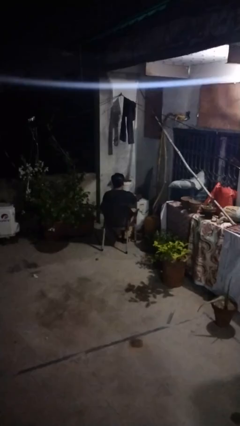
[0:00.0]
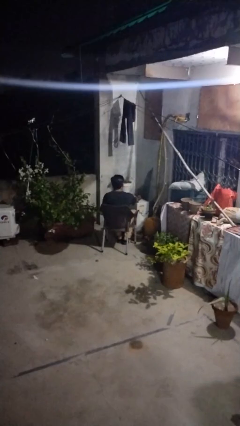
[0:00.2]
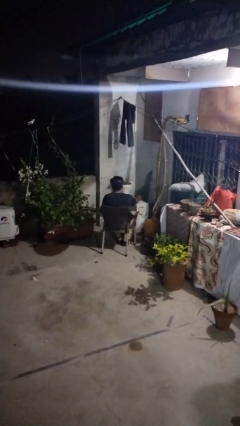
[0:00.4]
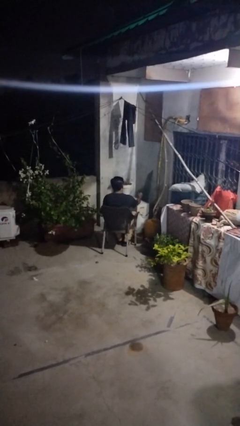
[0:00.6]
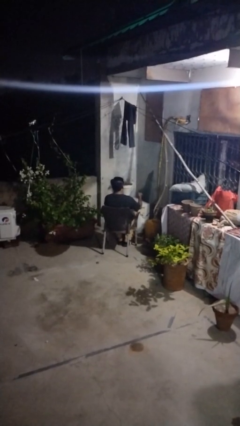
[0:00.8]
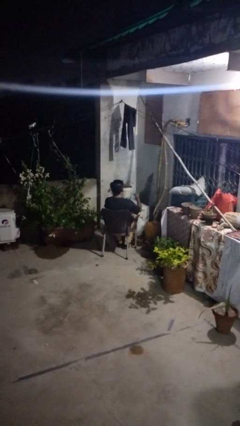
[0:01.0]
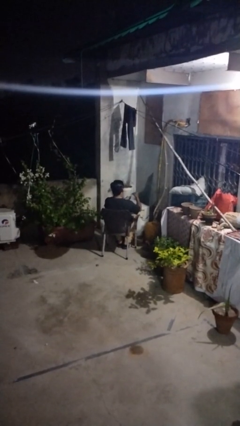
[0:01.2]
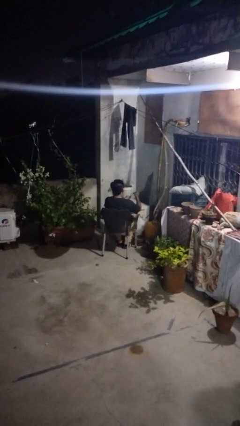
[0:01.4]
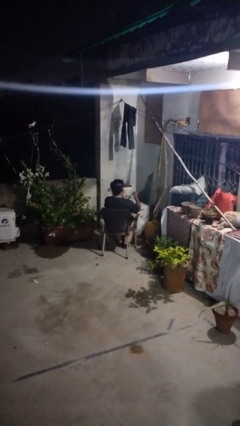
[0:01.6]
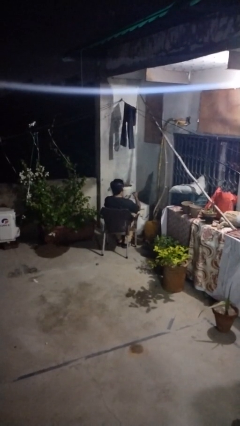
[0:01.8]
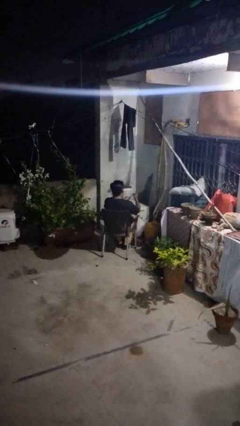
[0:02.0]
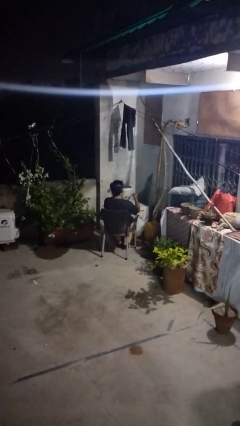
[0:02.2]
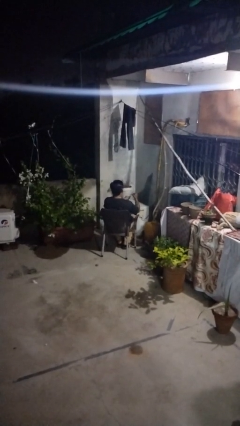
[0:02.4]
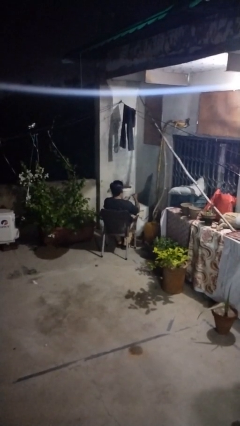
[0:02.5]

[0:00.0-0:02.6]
person paints fingernails

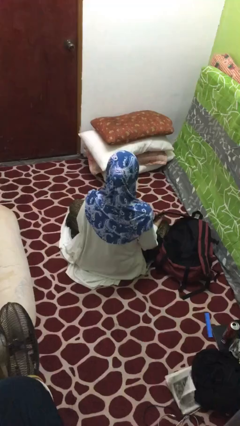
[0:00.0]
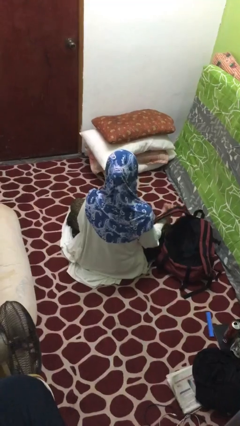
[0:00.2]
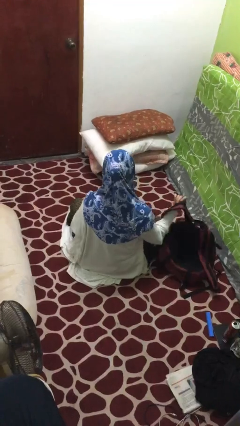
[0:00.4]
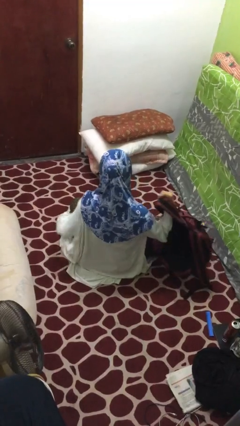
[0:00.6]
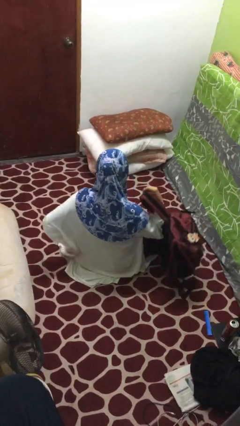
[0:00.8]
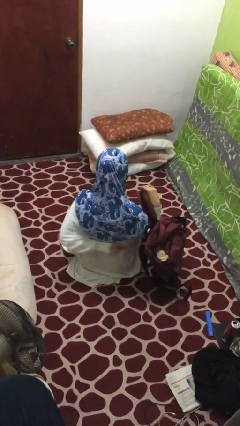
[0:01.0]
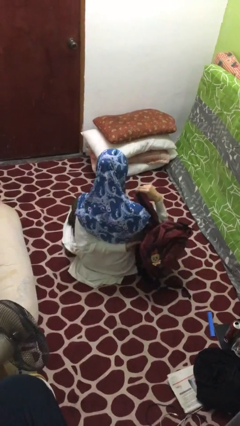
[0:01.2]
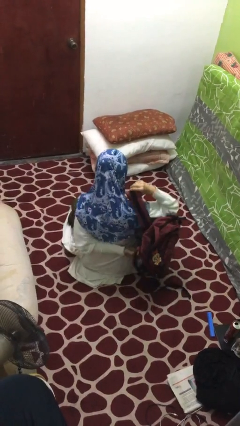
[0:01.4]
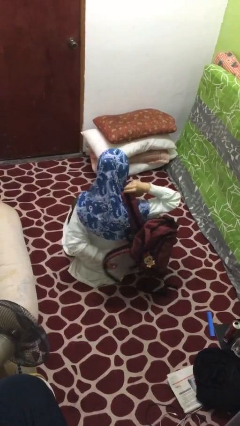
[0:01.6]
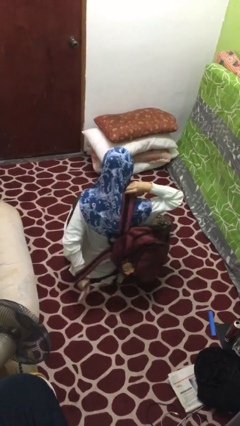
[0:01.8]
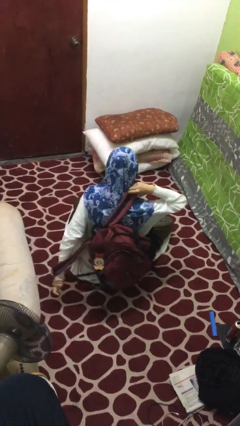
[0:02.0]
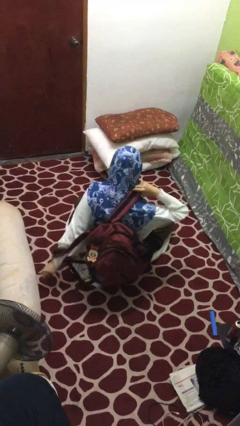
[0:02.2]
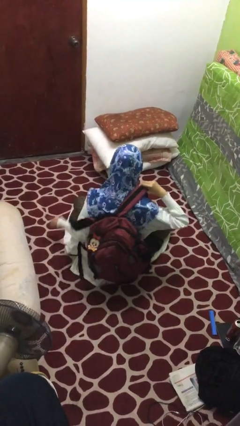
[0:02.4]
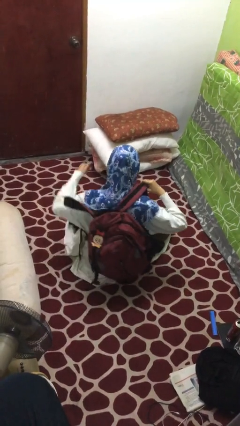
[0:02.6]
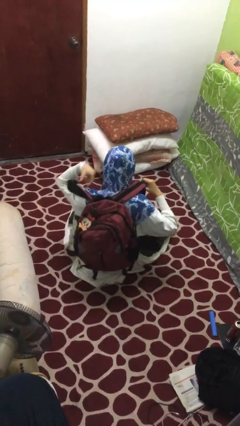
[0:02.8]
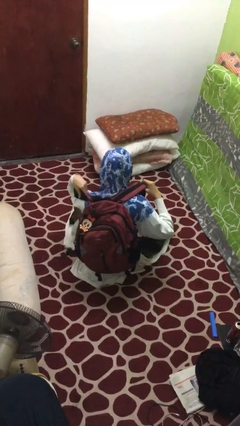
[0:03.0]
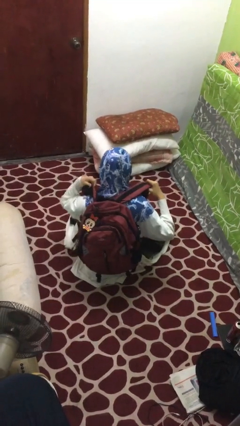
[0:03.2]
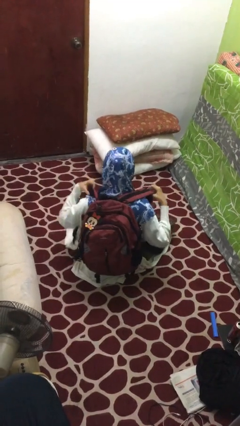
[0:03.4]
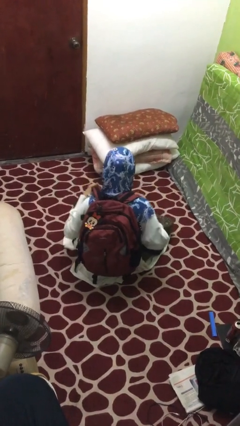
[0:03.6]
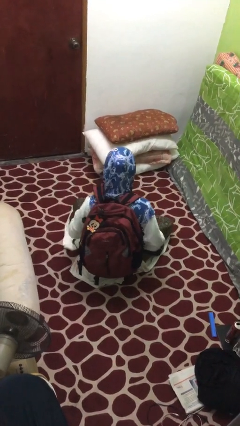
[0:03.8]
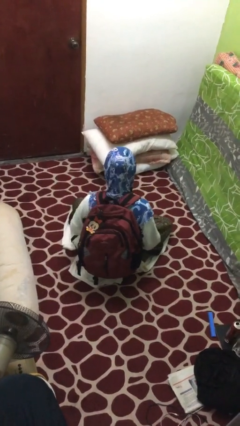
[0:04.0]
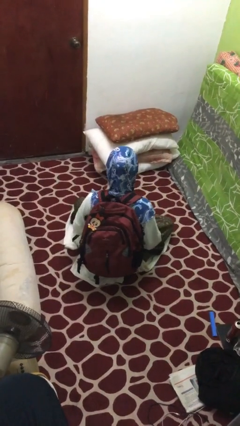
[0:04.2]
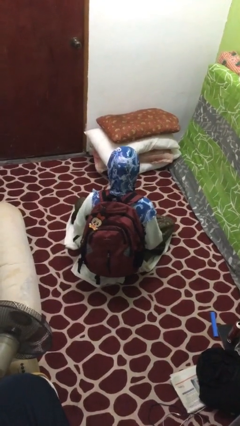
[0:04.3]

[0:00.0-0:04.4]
person puts on backpack

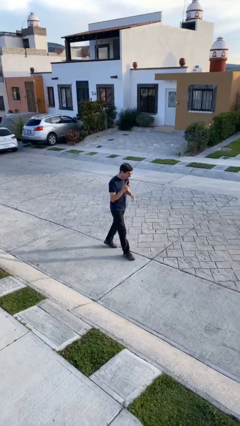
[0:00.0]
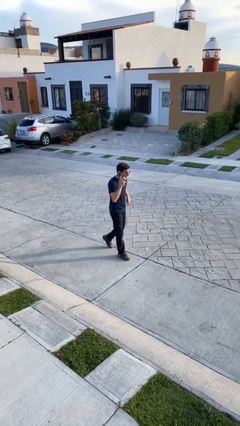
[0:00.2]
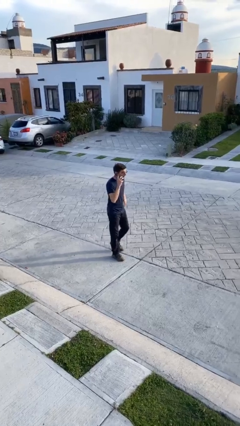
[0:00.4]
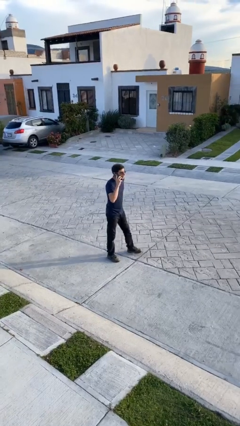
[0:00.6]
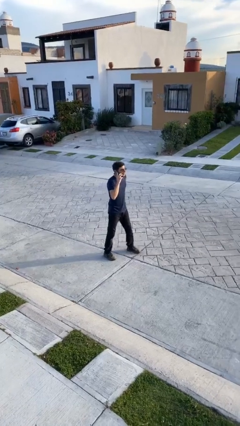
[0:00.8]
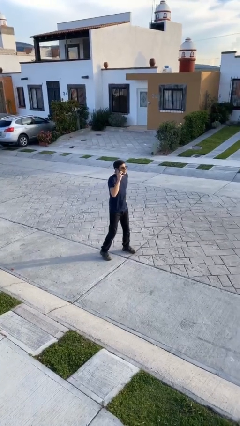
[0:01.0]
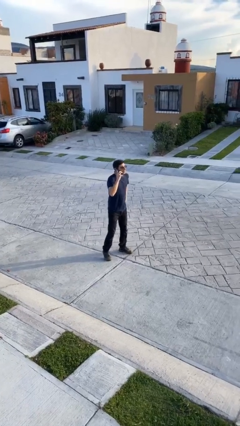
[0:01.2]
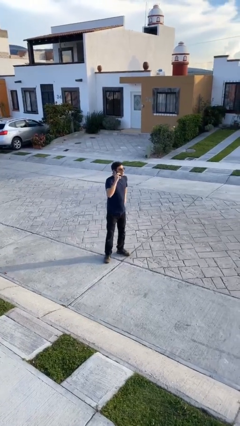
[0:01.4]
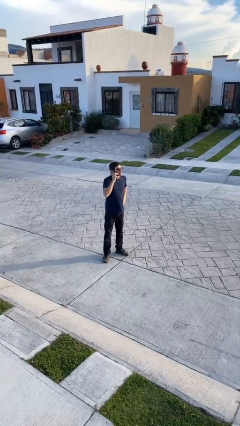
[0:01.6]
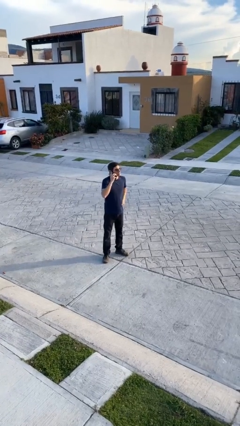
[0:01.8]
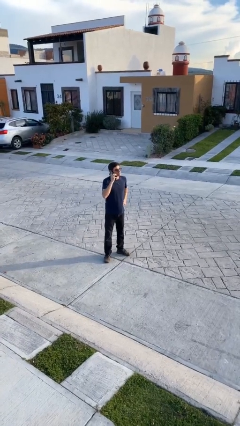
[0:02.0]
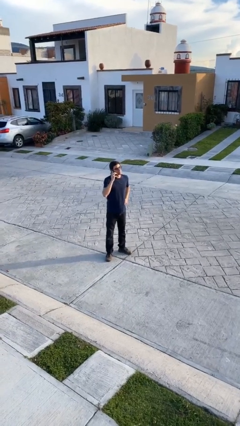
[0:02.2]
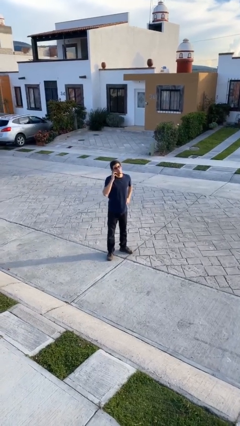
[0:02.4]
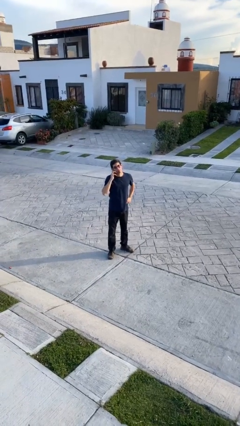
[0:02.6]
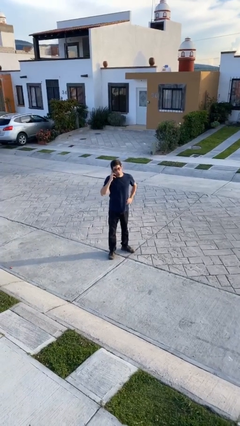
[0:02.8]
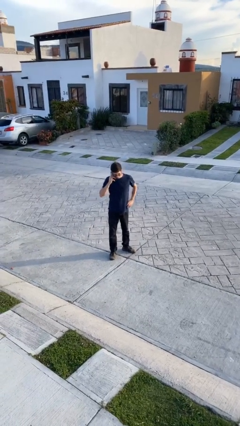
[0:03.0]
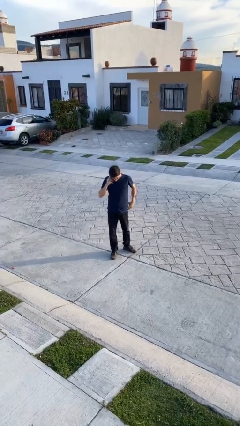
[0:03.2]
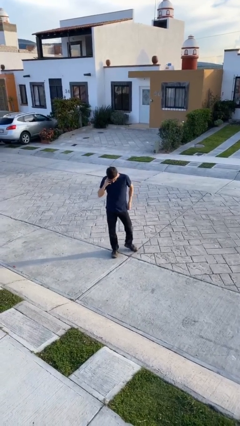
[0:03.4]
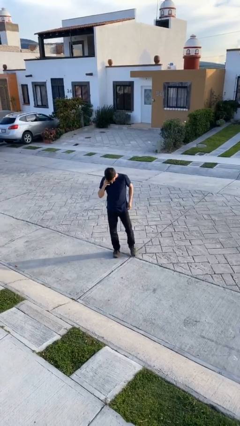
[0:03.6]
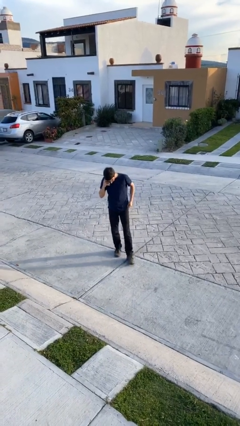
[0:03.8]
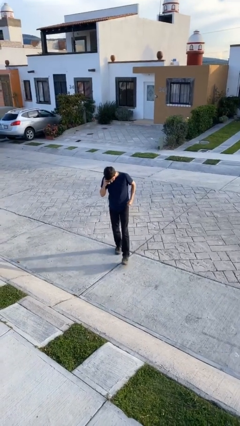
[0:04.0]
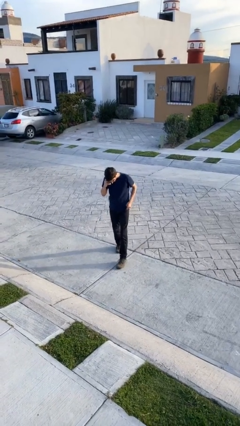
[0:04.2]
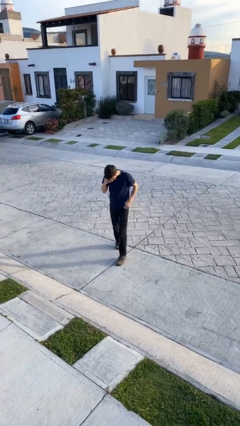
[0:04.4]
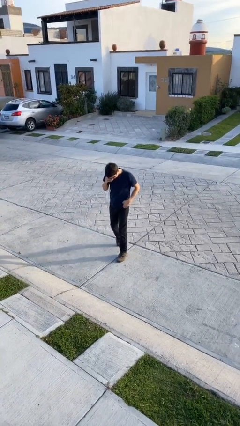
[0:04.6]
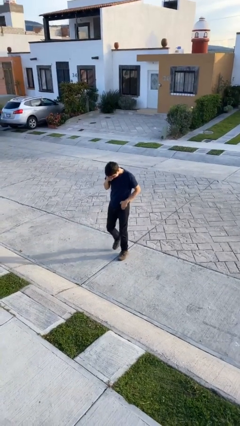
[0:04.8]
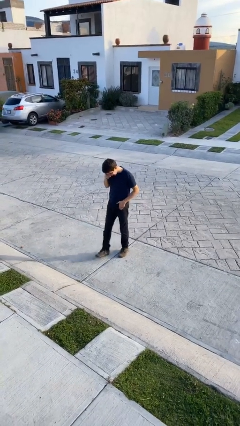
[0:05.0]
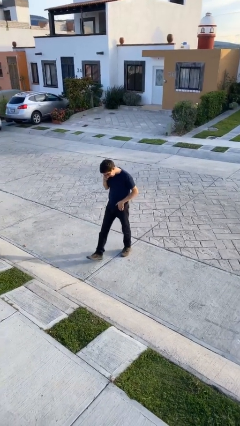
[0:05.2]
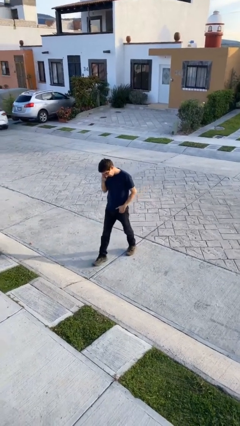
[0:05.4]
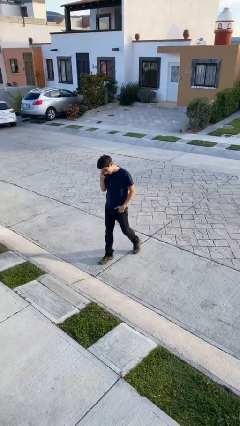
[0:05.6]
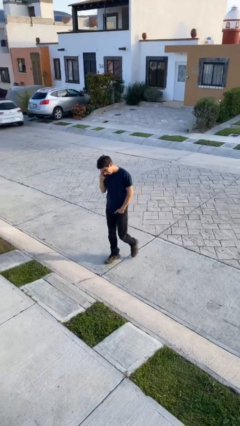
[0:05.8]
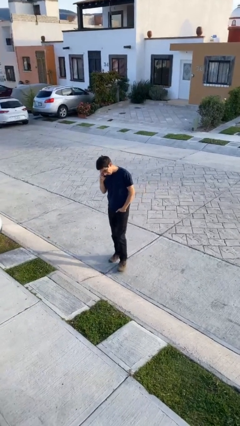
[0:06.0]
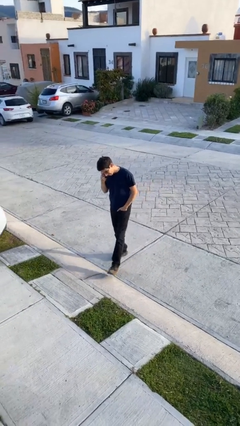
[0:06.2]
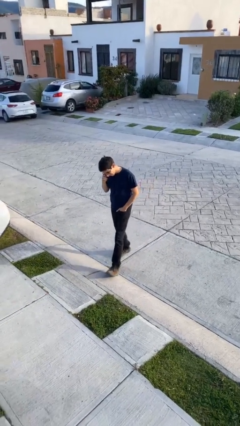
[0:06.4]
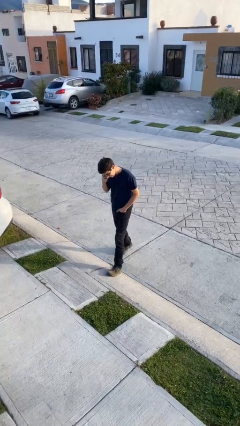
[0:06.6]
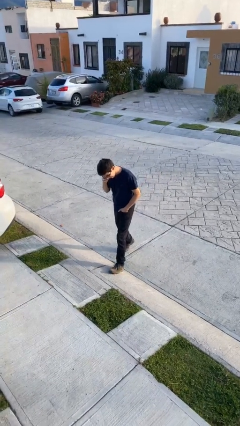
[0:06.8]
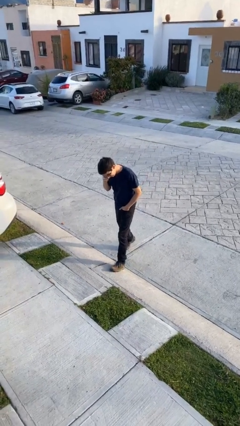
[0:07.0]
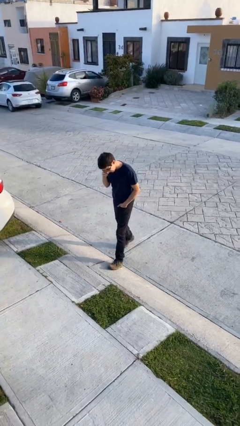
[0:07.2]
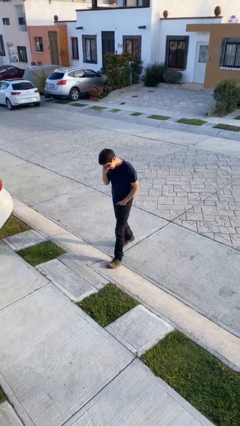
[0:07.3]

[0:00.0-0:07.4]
person talks on phone

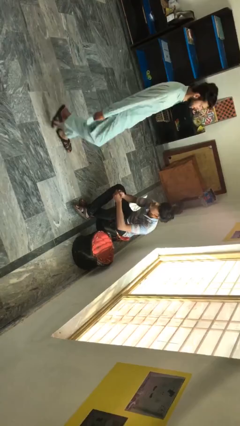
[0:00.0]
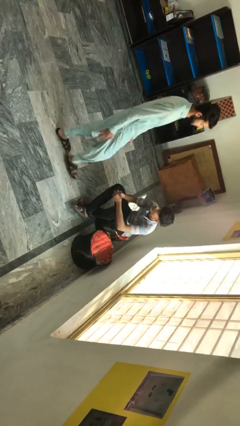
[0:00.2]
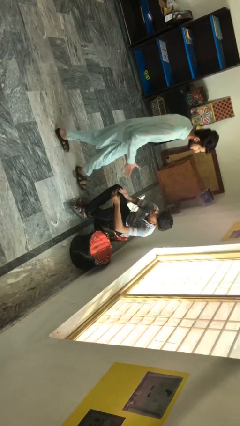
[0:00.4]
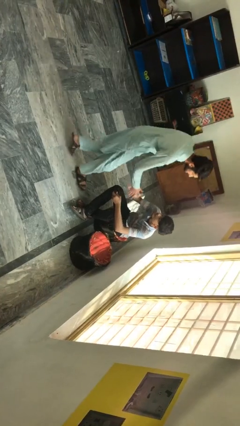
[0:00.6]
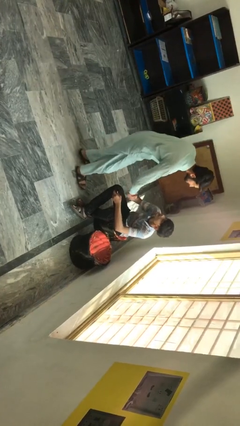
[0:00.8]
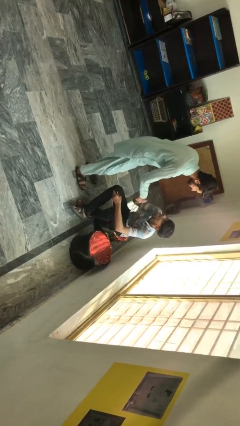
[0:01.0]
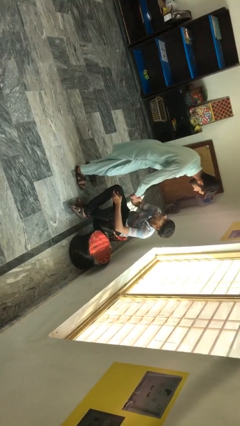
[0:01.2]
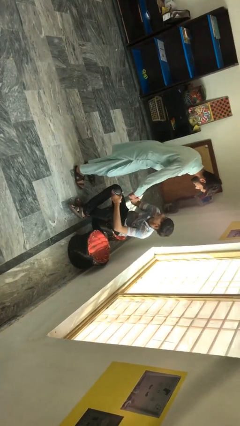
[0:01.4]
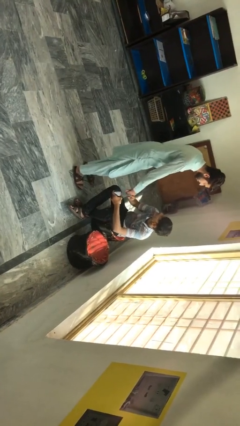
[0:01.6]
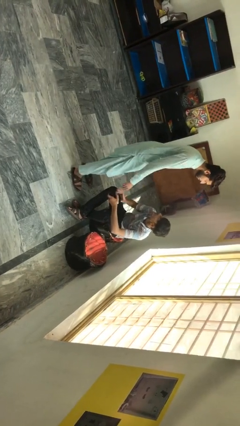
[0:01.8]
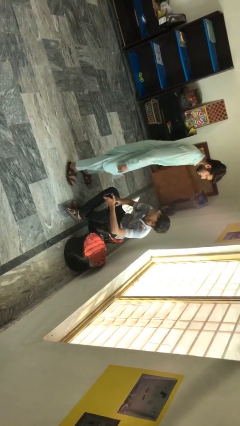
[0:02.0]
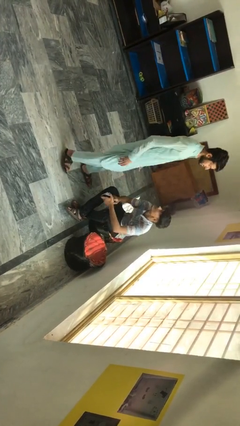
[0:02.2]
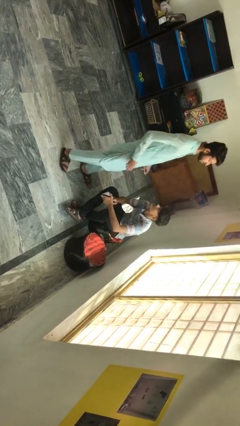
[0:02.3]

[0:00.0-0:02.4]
person shakes hand

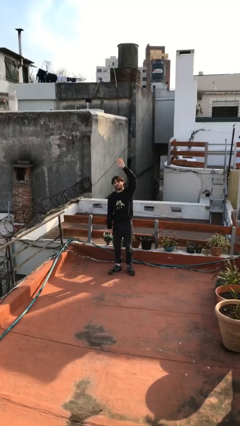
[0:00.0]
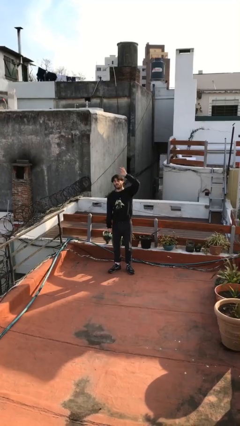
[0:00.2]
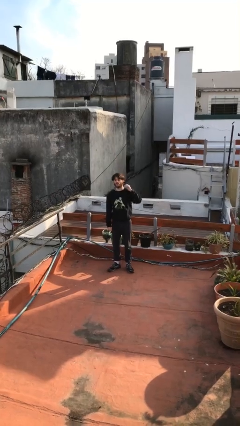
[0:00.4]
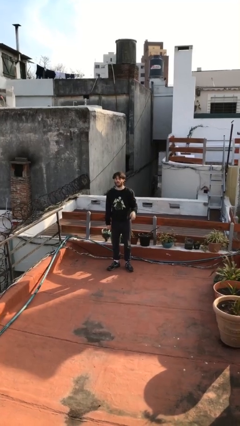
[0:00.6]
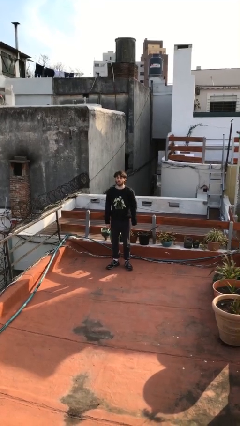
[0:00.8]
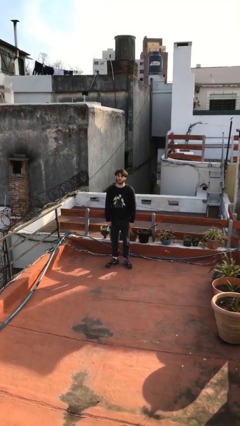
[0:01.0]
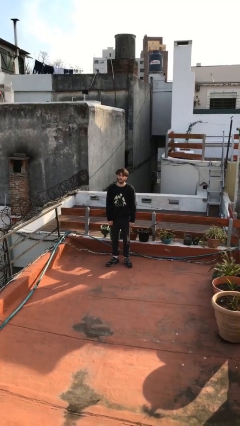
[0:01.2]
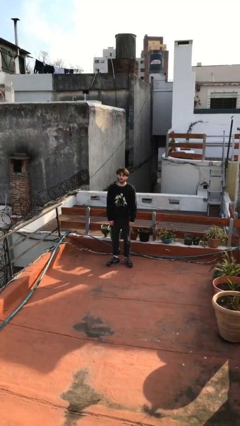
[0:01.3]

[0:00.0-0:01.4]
person gestures lower hand
